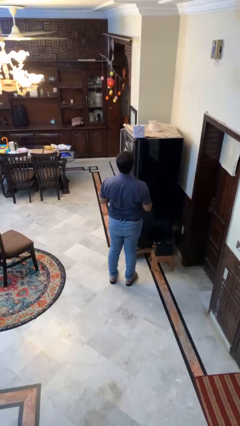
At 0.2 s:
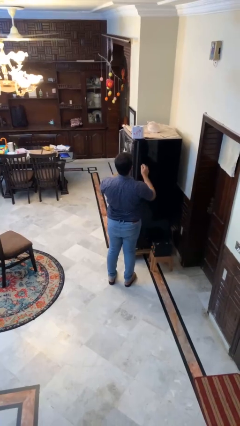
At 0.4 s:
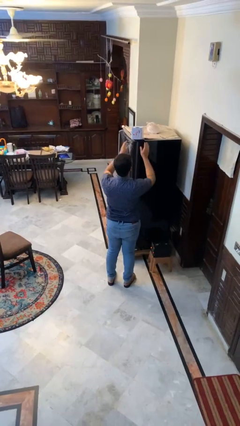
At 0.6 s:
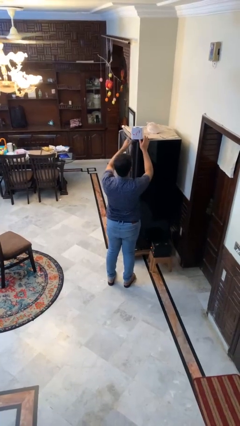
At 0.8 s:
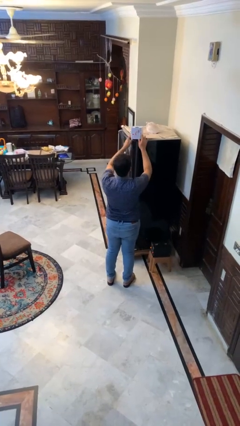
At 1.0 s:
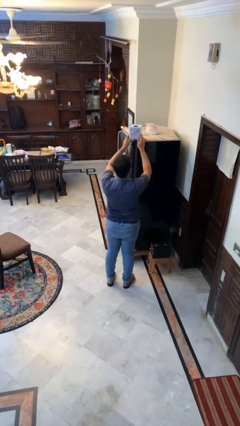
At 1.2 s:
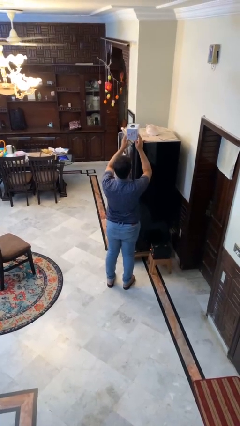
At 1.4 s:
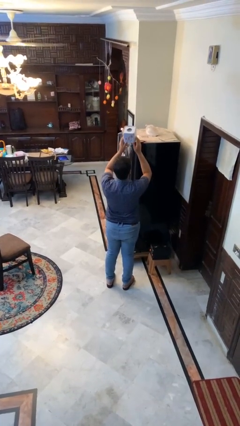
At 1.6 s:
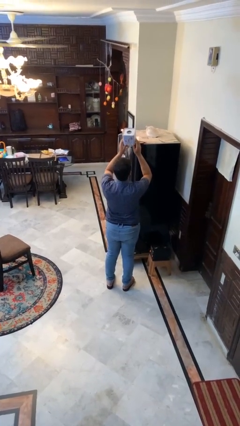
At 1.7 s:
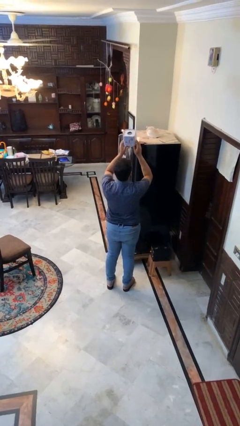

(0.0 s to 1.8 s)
person picks up object from shelf

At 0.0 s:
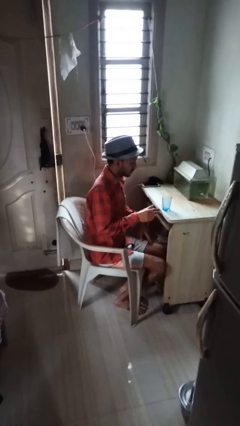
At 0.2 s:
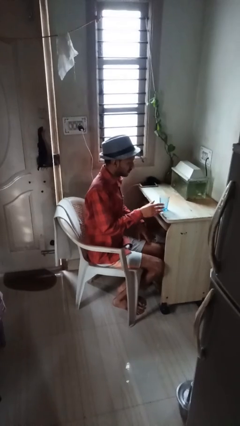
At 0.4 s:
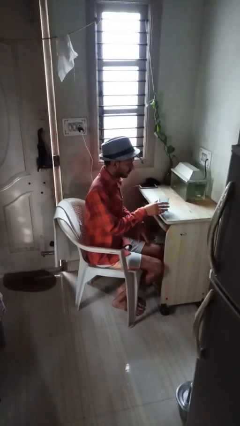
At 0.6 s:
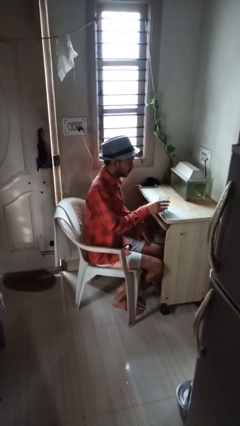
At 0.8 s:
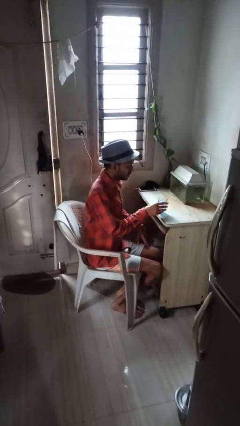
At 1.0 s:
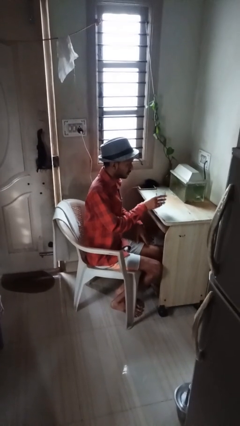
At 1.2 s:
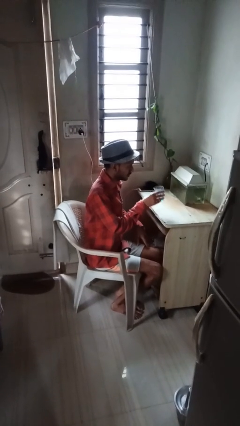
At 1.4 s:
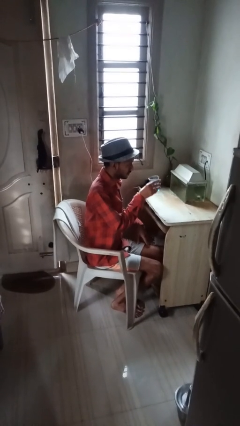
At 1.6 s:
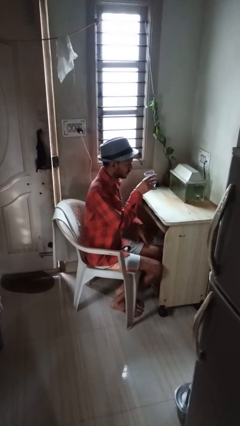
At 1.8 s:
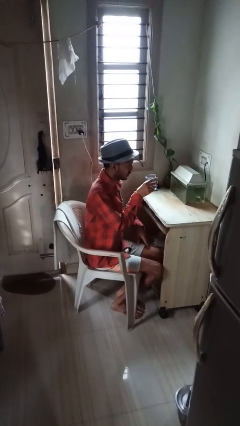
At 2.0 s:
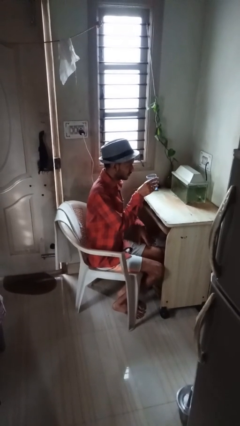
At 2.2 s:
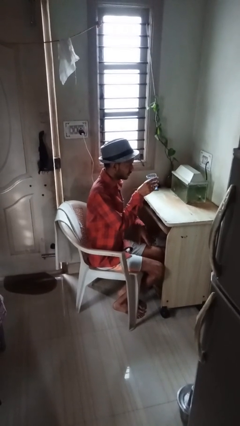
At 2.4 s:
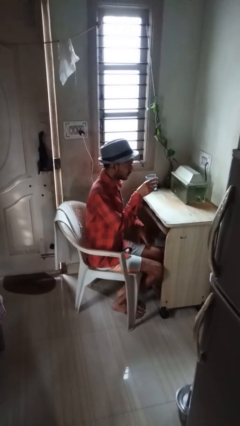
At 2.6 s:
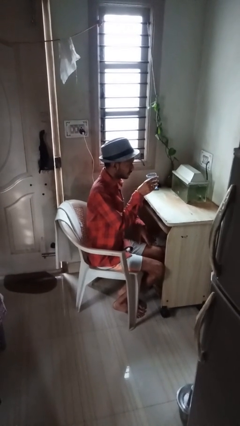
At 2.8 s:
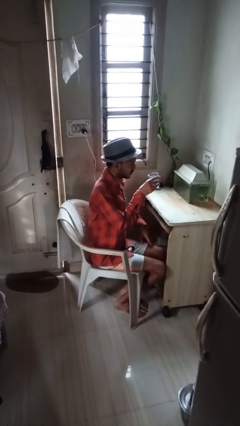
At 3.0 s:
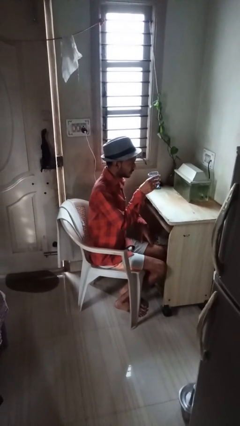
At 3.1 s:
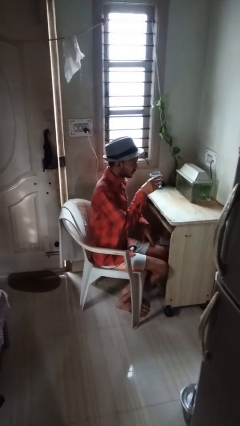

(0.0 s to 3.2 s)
person picks up object from table

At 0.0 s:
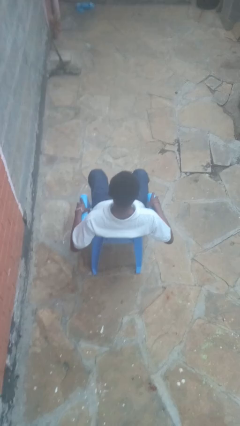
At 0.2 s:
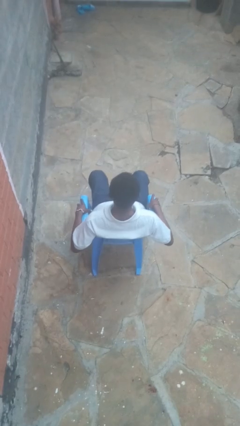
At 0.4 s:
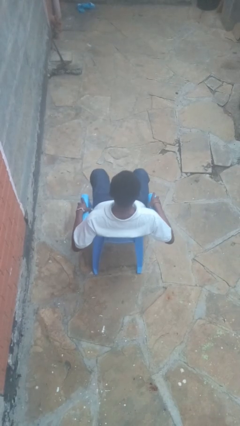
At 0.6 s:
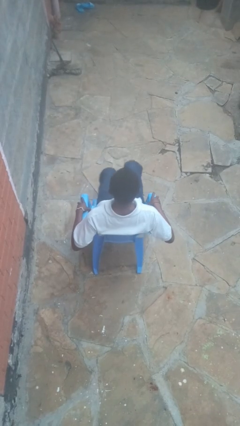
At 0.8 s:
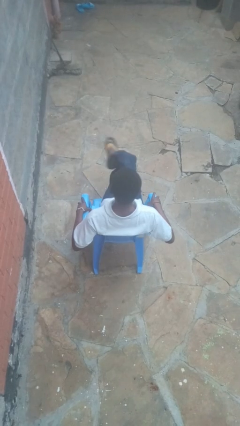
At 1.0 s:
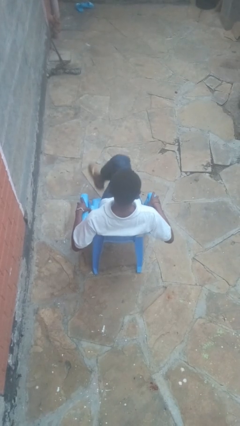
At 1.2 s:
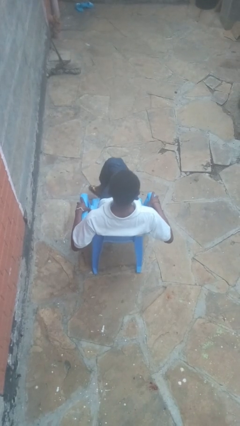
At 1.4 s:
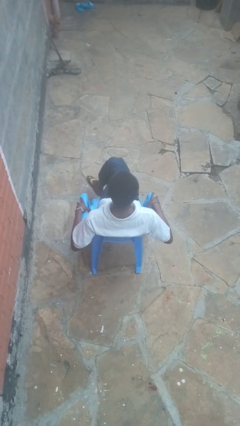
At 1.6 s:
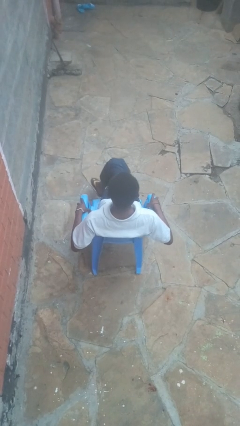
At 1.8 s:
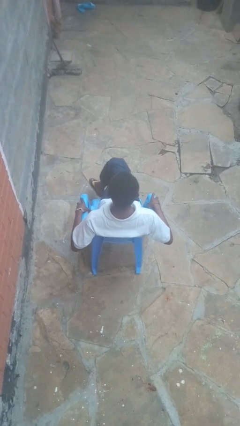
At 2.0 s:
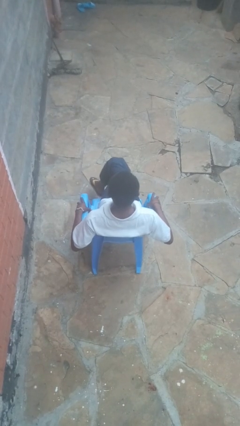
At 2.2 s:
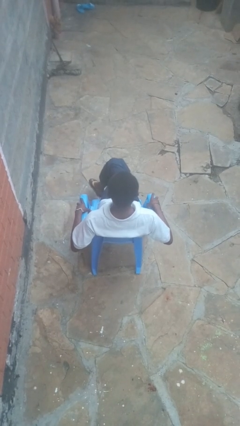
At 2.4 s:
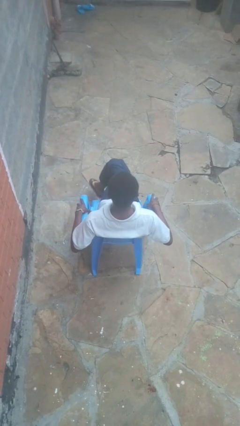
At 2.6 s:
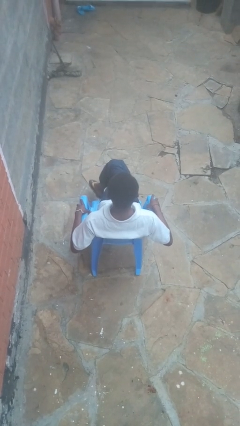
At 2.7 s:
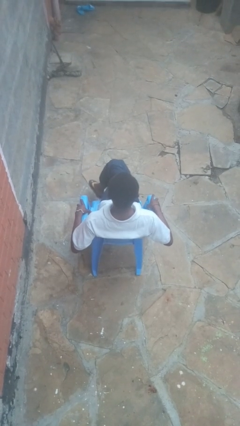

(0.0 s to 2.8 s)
person crosses legs

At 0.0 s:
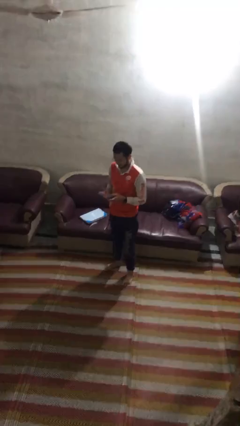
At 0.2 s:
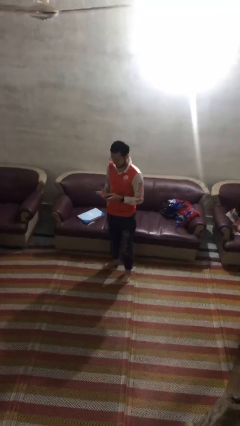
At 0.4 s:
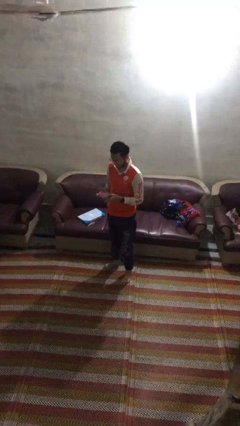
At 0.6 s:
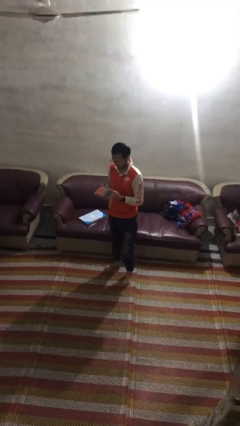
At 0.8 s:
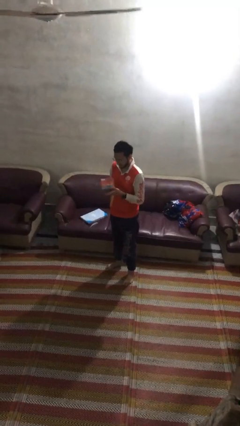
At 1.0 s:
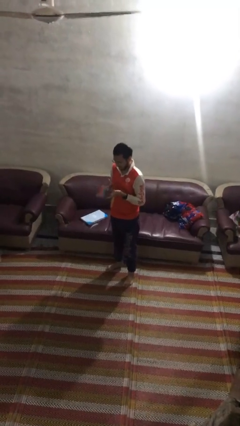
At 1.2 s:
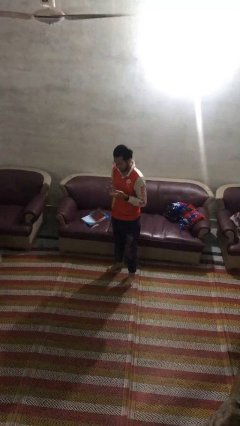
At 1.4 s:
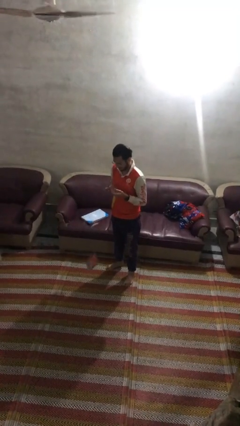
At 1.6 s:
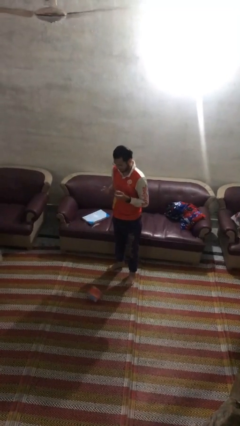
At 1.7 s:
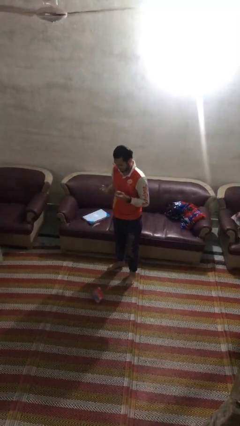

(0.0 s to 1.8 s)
person drops object

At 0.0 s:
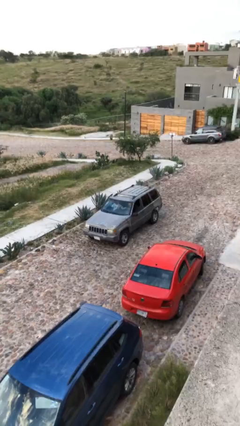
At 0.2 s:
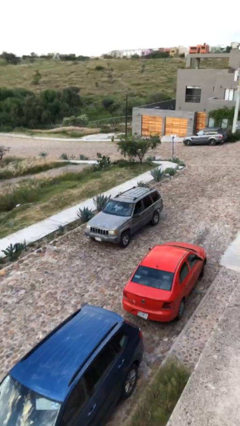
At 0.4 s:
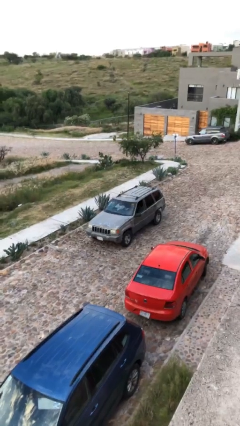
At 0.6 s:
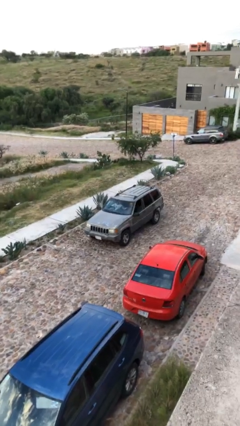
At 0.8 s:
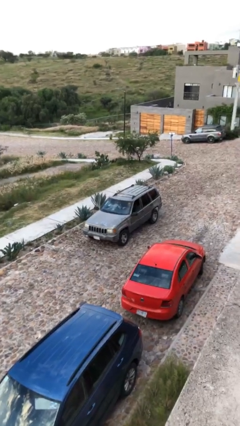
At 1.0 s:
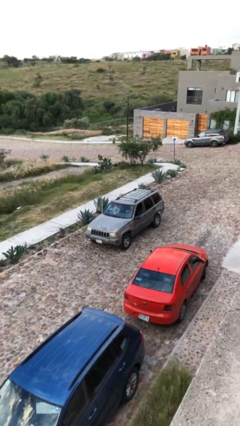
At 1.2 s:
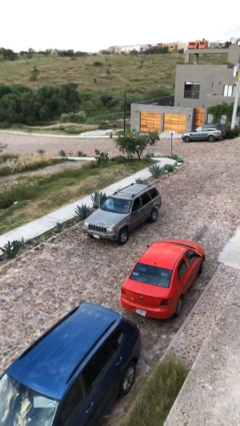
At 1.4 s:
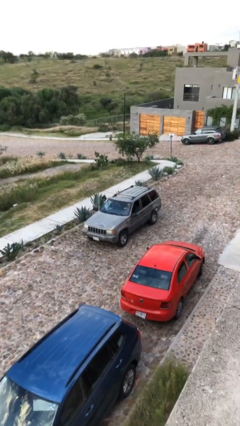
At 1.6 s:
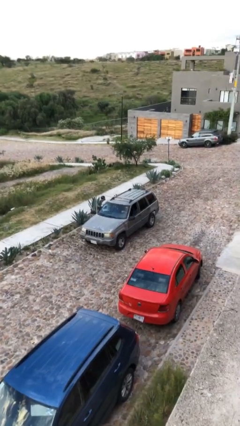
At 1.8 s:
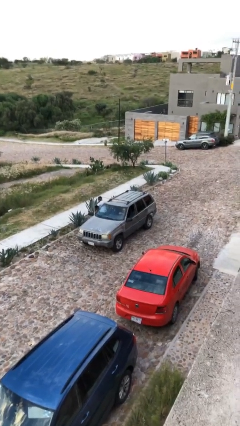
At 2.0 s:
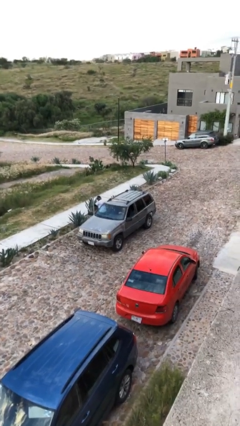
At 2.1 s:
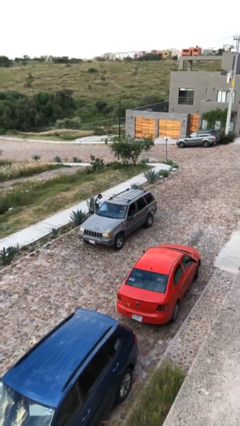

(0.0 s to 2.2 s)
car drops off person

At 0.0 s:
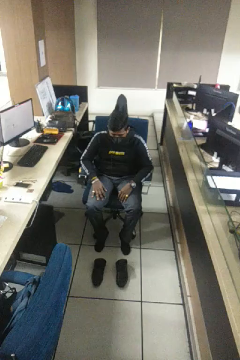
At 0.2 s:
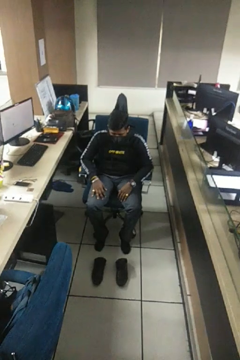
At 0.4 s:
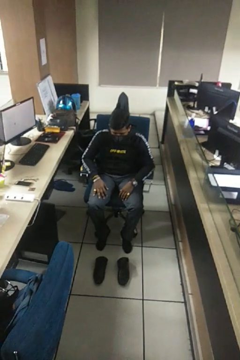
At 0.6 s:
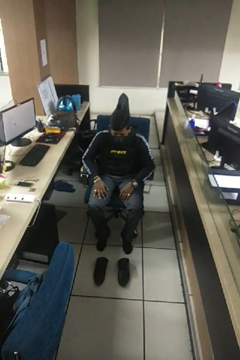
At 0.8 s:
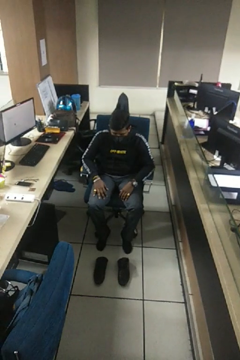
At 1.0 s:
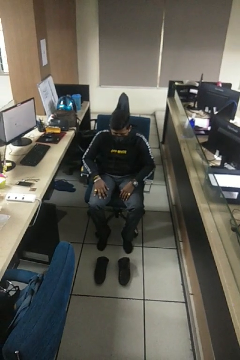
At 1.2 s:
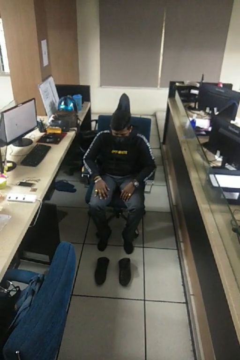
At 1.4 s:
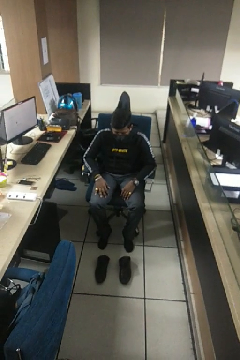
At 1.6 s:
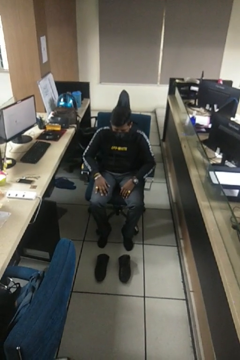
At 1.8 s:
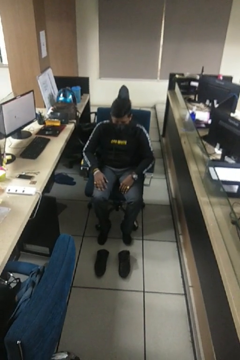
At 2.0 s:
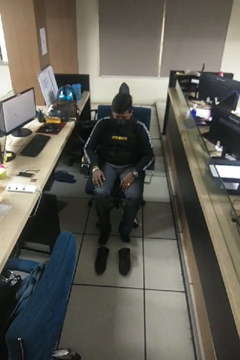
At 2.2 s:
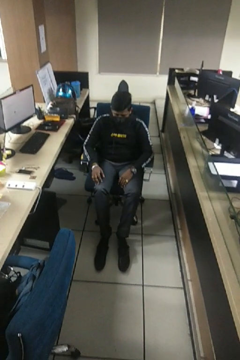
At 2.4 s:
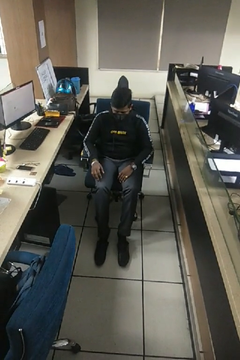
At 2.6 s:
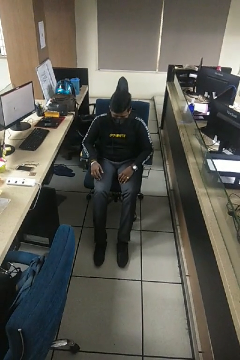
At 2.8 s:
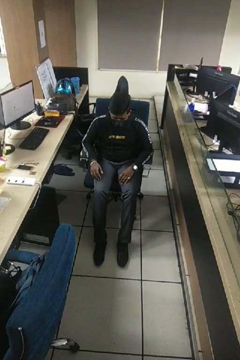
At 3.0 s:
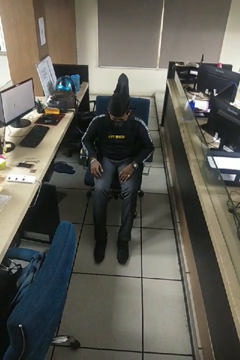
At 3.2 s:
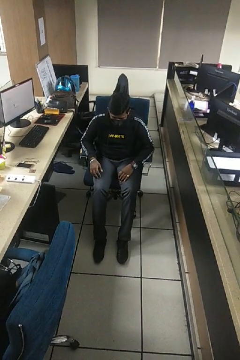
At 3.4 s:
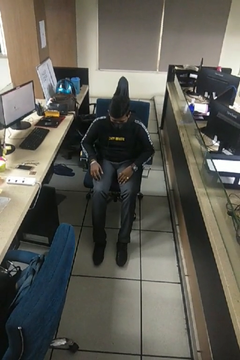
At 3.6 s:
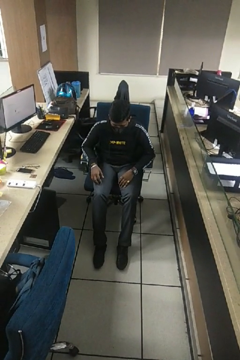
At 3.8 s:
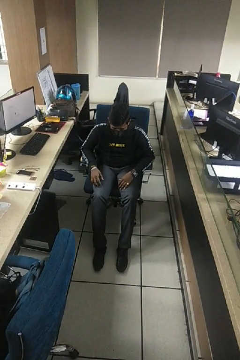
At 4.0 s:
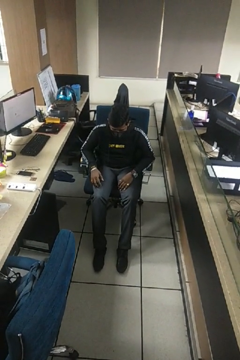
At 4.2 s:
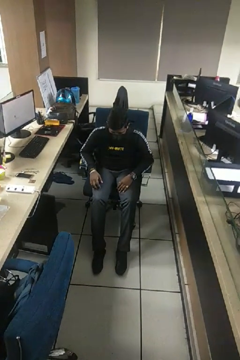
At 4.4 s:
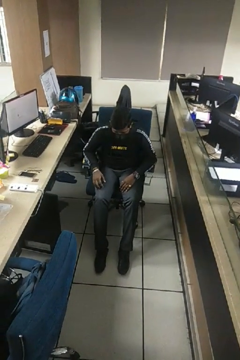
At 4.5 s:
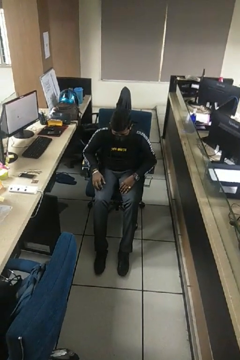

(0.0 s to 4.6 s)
person puts on shoes

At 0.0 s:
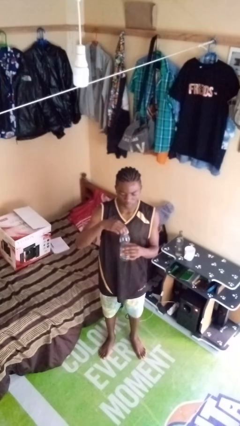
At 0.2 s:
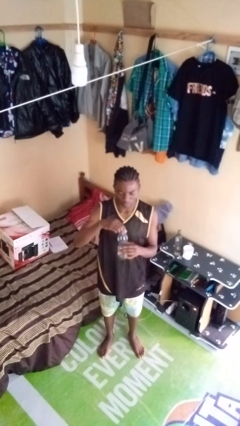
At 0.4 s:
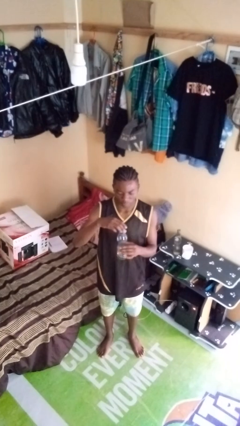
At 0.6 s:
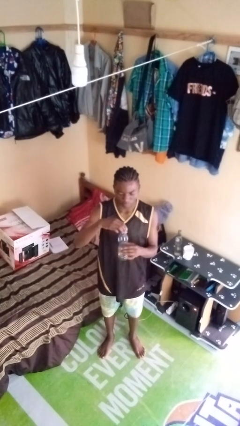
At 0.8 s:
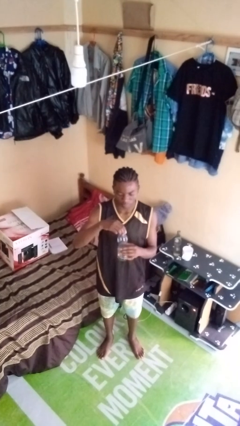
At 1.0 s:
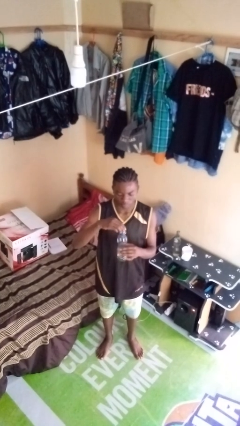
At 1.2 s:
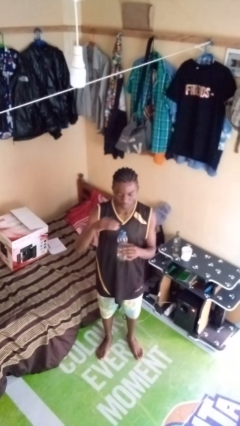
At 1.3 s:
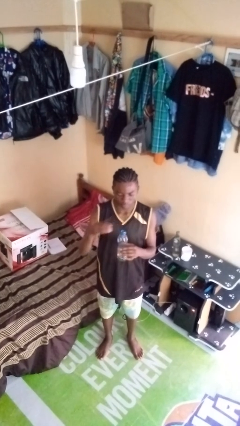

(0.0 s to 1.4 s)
person unscrews lid from bottle

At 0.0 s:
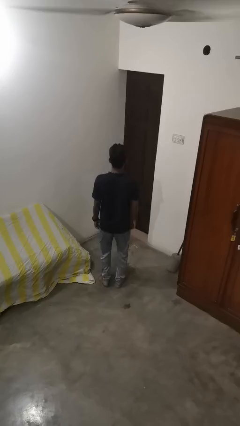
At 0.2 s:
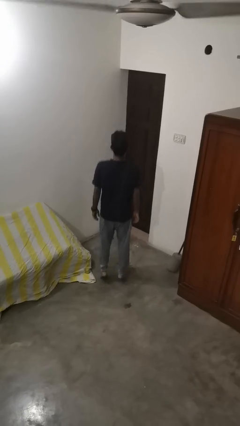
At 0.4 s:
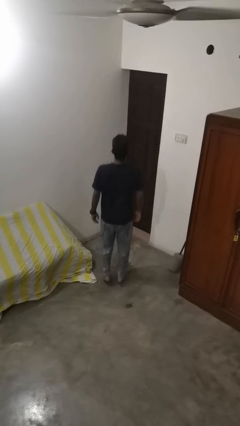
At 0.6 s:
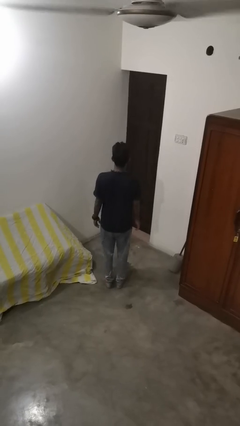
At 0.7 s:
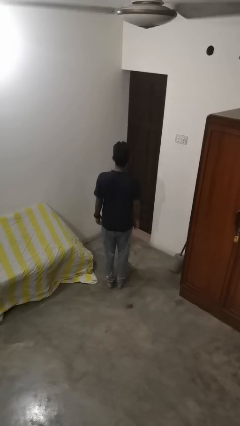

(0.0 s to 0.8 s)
person jumps
